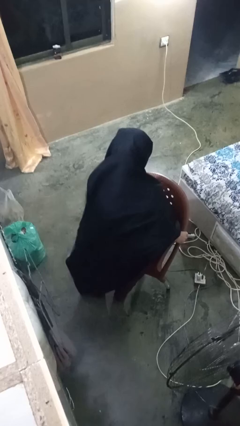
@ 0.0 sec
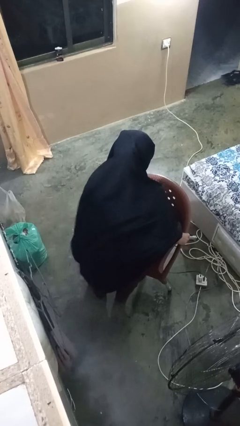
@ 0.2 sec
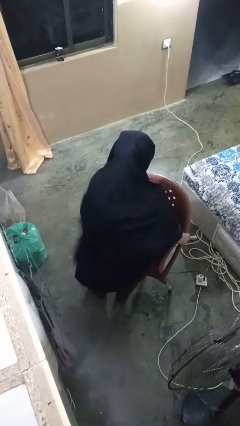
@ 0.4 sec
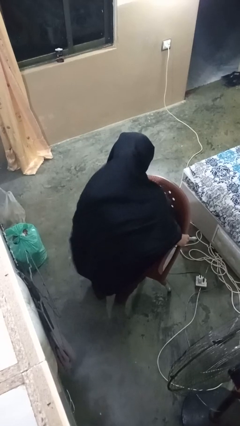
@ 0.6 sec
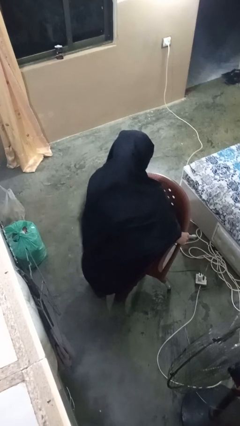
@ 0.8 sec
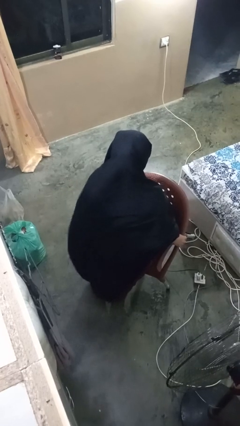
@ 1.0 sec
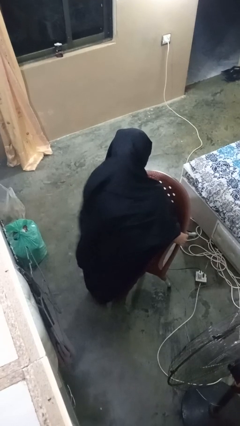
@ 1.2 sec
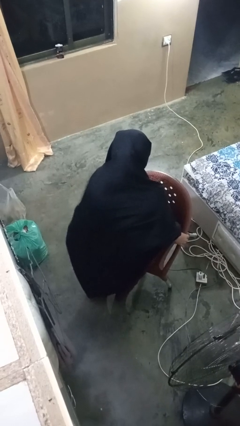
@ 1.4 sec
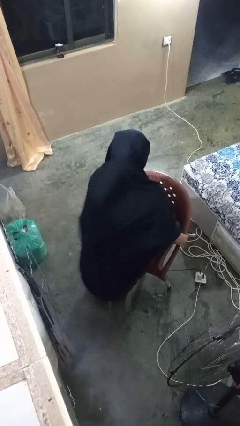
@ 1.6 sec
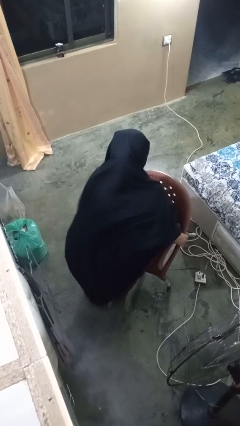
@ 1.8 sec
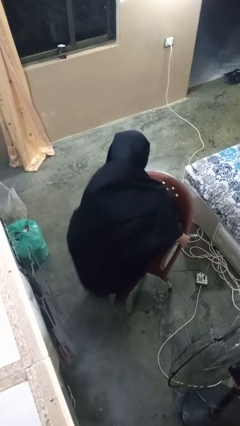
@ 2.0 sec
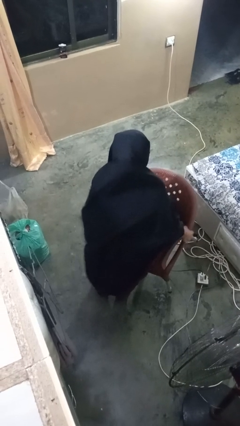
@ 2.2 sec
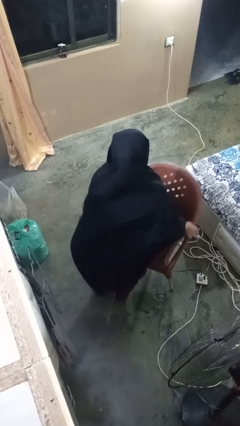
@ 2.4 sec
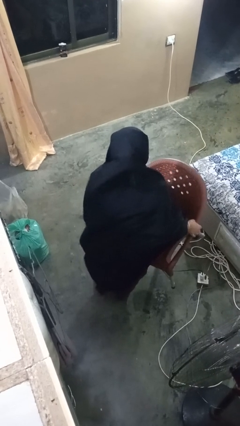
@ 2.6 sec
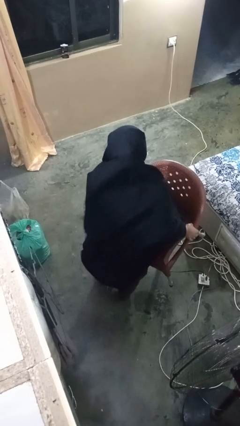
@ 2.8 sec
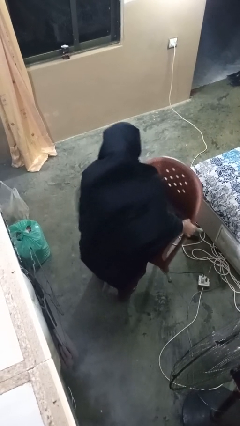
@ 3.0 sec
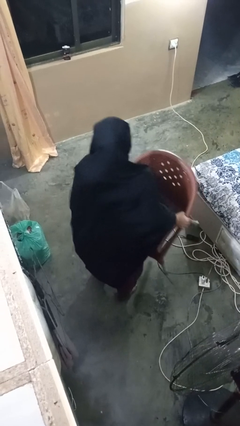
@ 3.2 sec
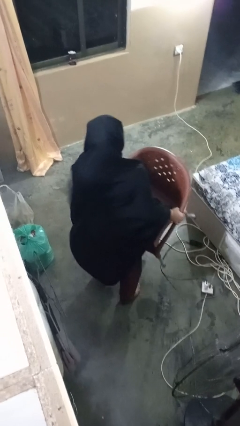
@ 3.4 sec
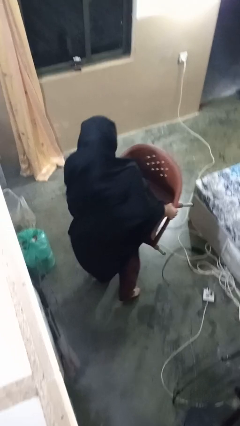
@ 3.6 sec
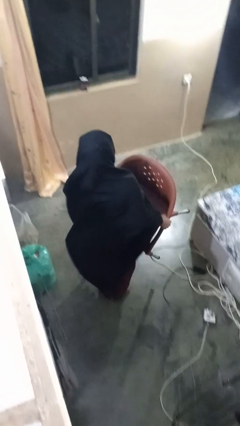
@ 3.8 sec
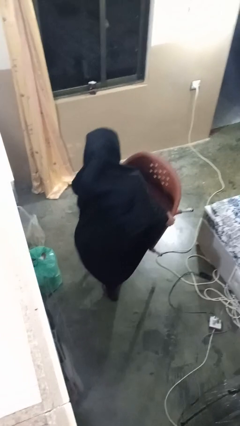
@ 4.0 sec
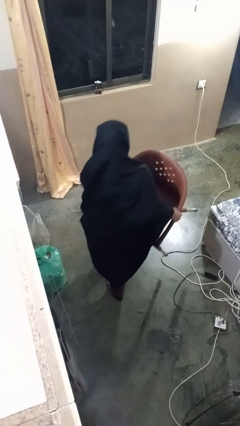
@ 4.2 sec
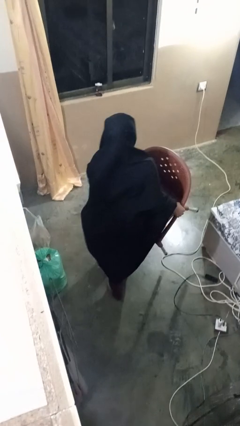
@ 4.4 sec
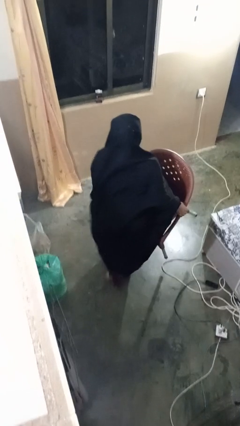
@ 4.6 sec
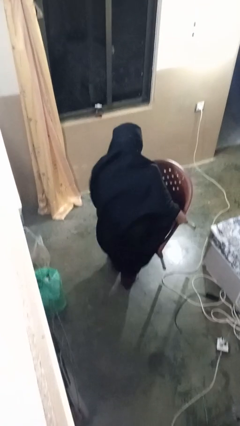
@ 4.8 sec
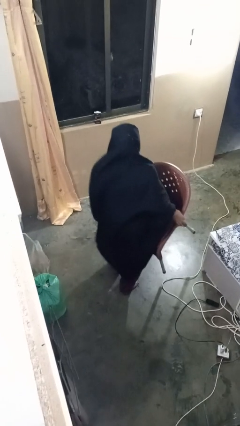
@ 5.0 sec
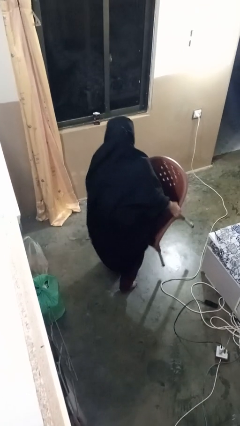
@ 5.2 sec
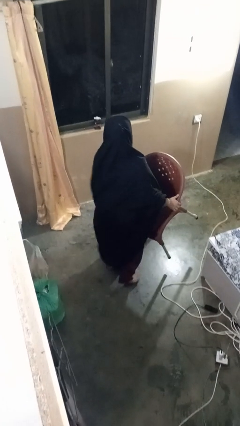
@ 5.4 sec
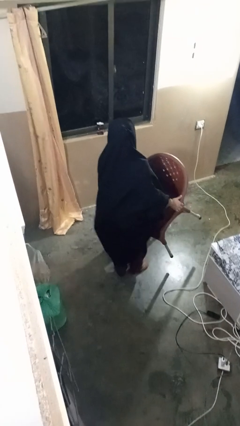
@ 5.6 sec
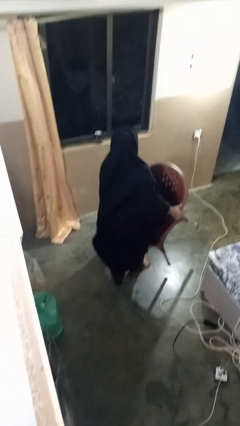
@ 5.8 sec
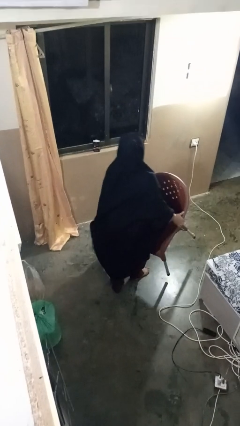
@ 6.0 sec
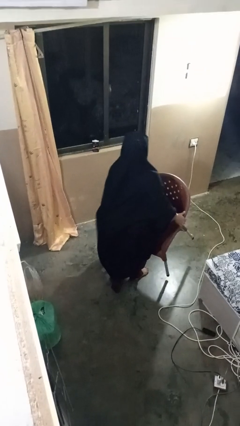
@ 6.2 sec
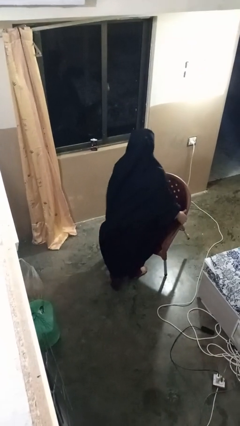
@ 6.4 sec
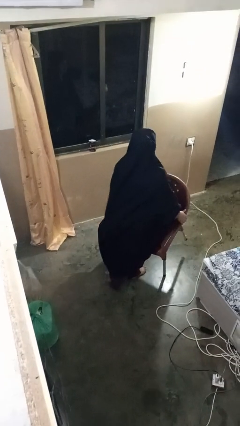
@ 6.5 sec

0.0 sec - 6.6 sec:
person carries furniture

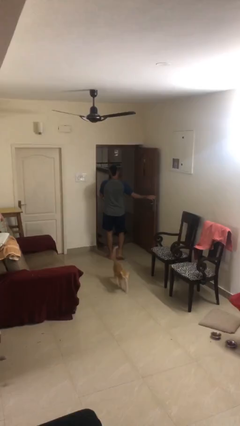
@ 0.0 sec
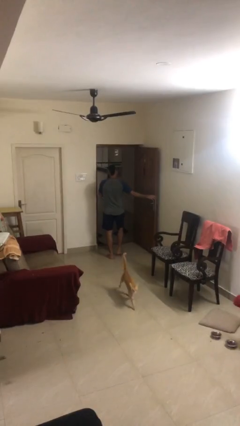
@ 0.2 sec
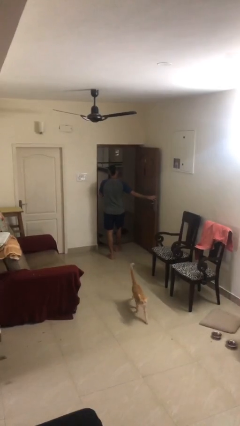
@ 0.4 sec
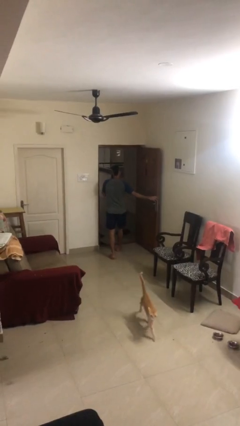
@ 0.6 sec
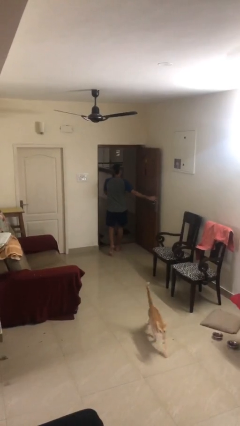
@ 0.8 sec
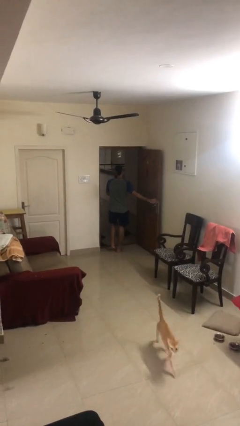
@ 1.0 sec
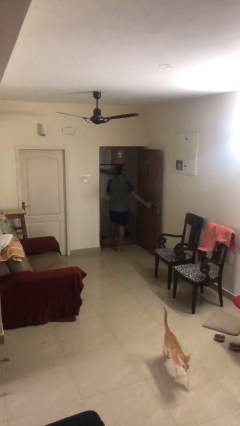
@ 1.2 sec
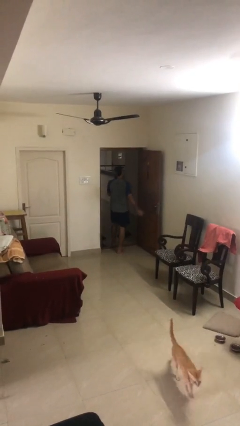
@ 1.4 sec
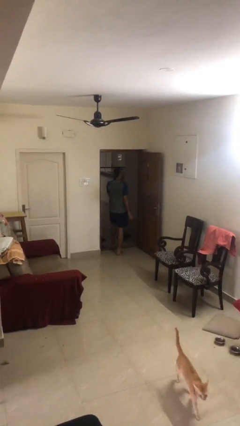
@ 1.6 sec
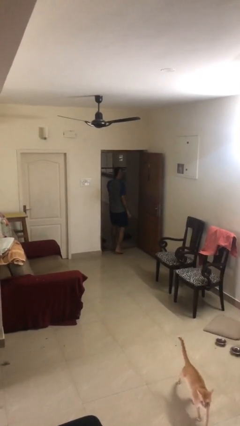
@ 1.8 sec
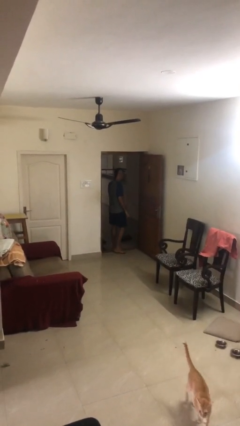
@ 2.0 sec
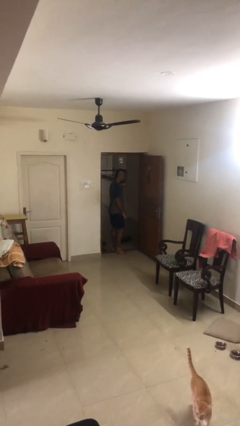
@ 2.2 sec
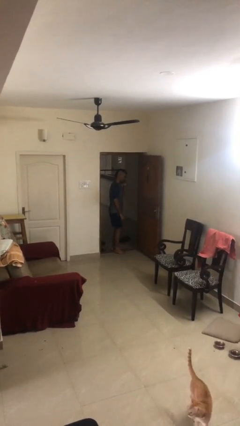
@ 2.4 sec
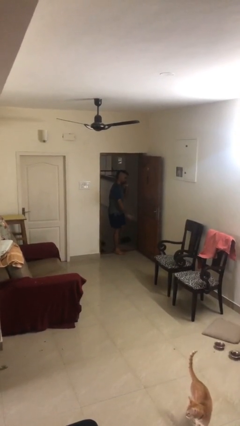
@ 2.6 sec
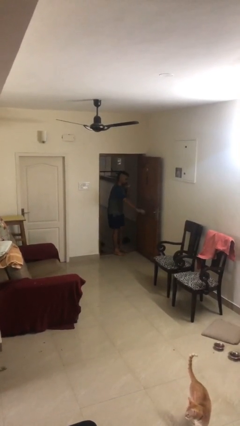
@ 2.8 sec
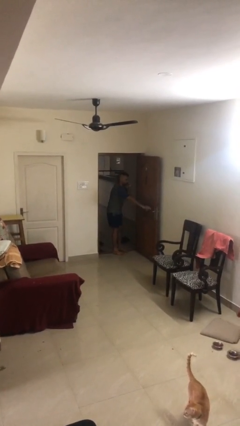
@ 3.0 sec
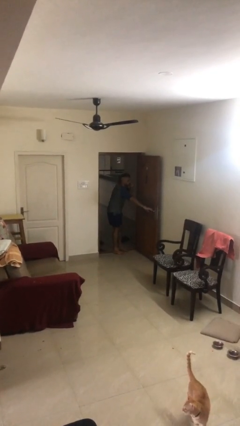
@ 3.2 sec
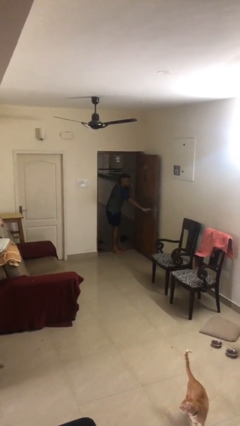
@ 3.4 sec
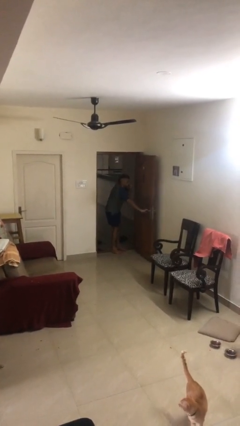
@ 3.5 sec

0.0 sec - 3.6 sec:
person exits scene through structure

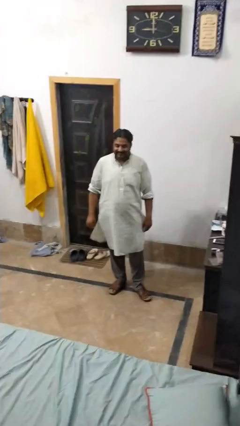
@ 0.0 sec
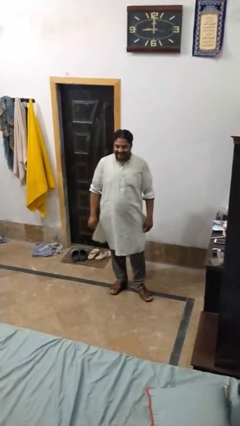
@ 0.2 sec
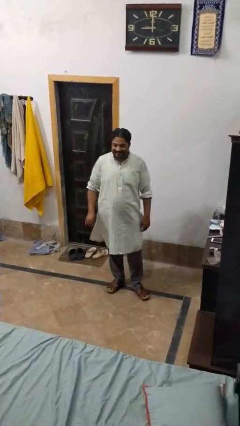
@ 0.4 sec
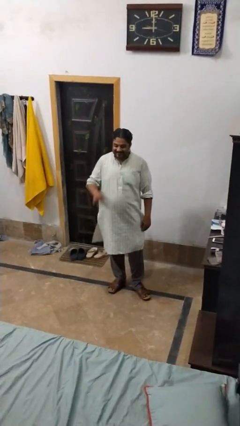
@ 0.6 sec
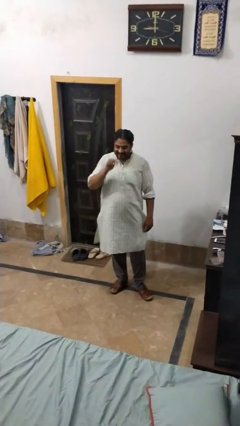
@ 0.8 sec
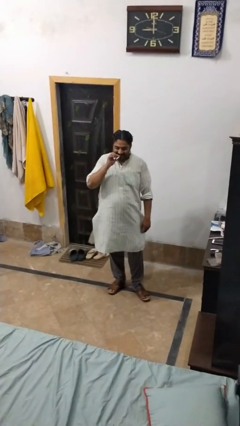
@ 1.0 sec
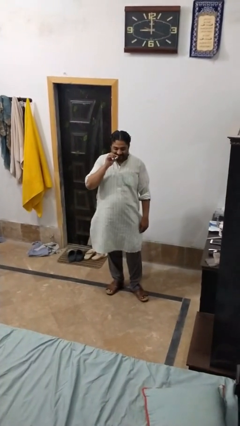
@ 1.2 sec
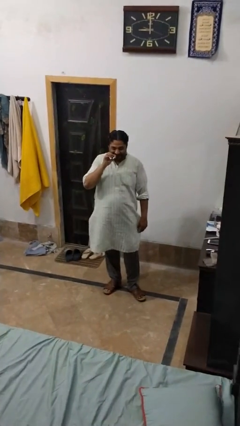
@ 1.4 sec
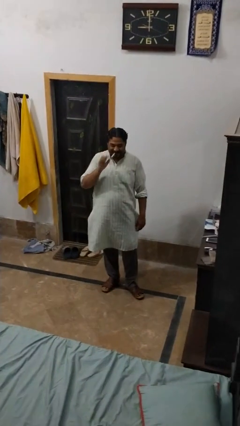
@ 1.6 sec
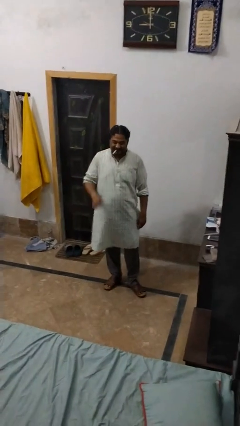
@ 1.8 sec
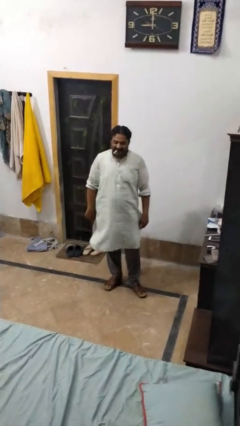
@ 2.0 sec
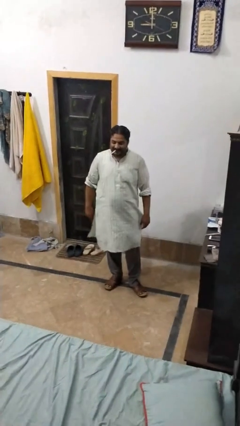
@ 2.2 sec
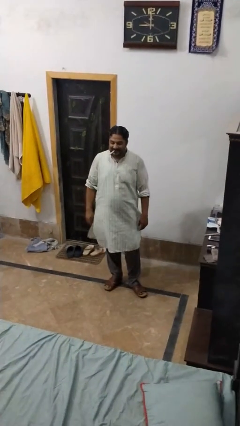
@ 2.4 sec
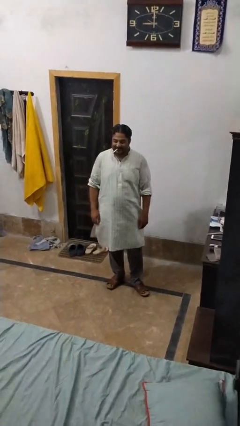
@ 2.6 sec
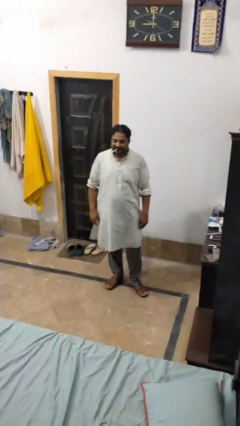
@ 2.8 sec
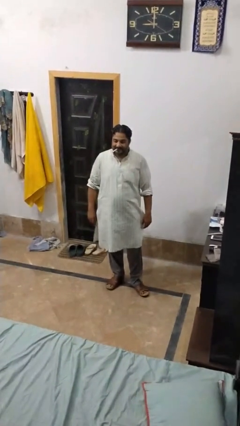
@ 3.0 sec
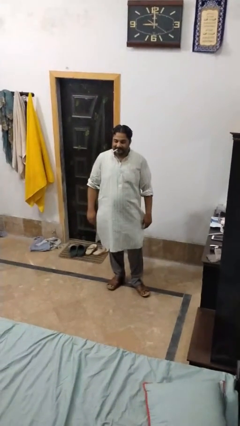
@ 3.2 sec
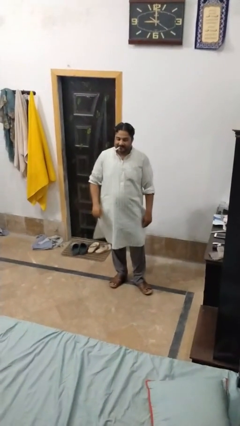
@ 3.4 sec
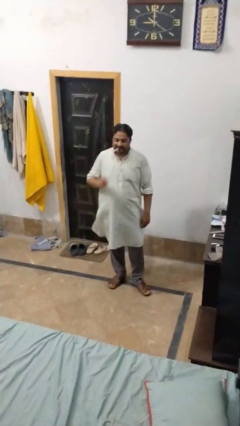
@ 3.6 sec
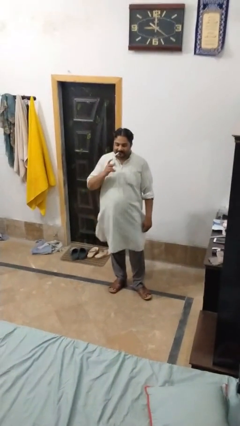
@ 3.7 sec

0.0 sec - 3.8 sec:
person vapes

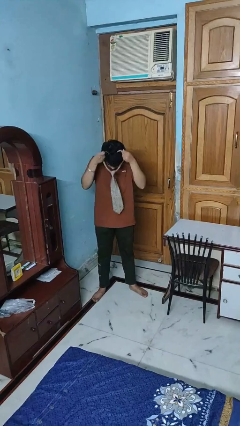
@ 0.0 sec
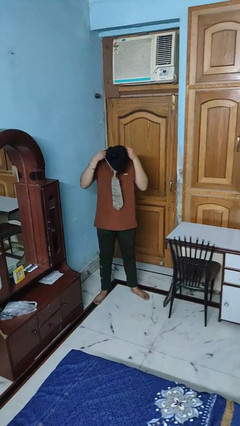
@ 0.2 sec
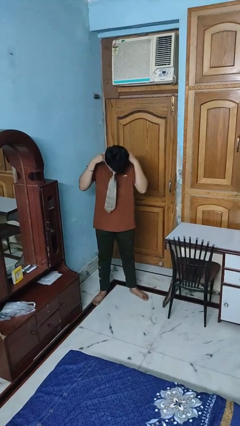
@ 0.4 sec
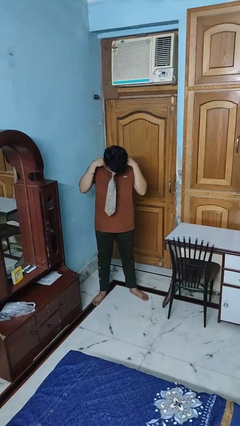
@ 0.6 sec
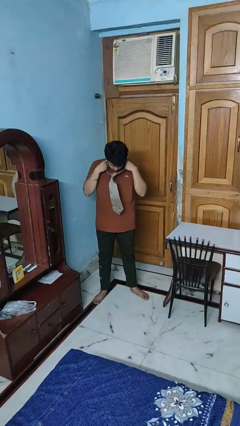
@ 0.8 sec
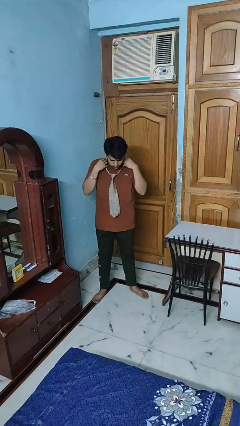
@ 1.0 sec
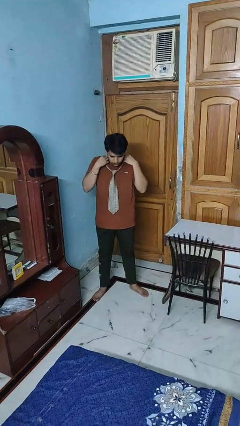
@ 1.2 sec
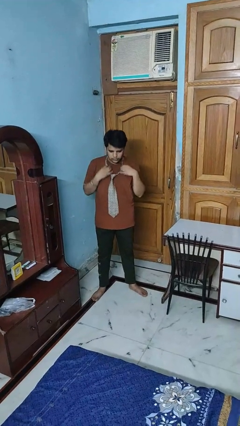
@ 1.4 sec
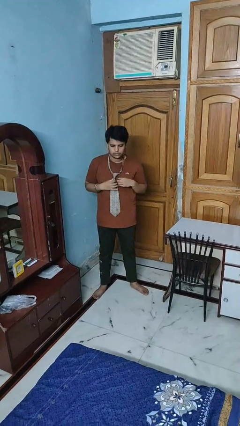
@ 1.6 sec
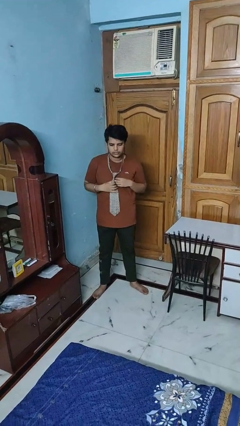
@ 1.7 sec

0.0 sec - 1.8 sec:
person puts on necktie

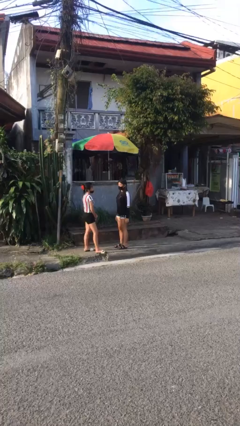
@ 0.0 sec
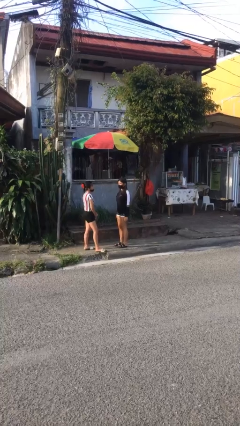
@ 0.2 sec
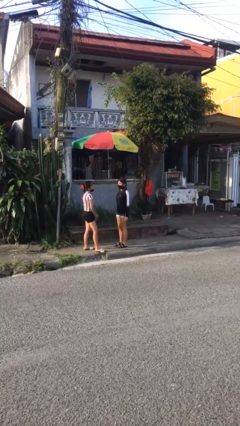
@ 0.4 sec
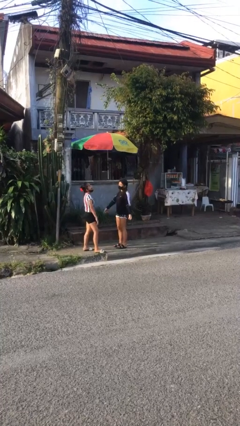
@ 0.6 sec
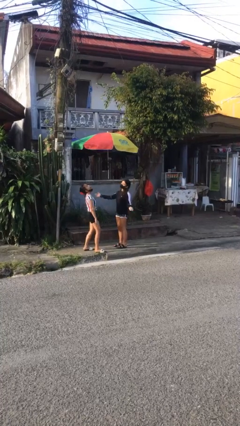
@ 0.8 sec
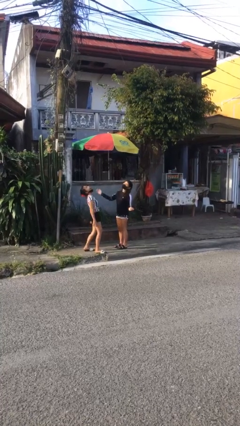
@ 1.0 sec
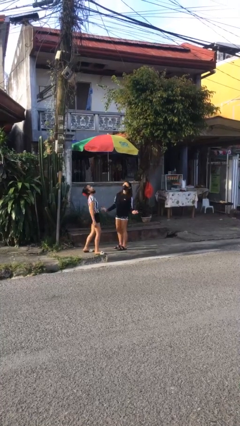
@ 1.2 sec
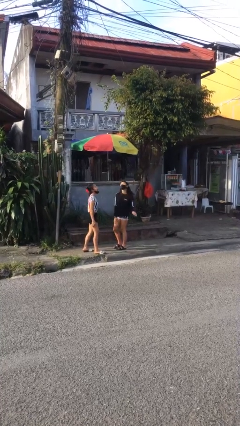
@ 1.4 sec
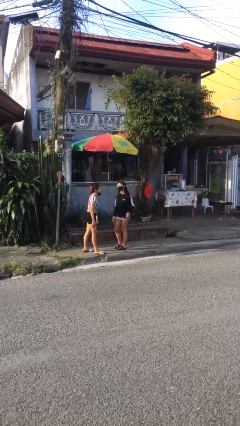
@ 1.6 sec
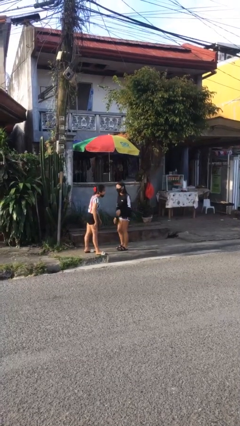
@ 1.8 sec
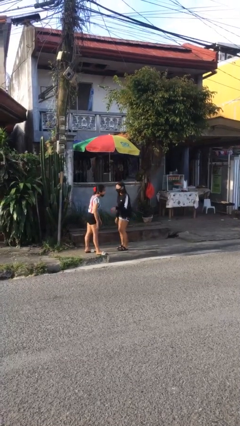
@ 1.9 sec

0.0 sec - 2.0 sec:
person laughs with person
